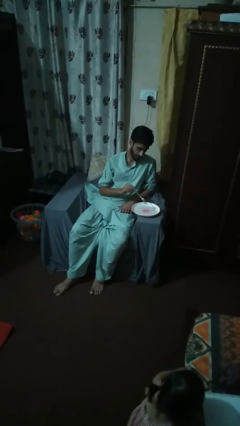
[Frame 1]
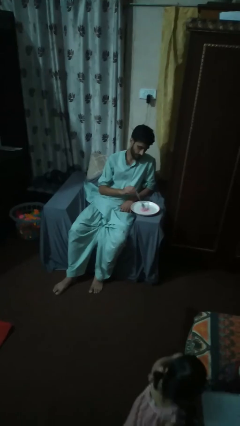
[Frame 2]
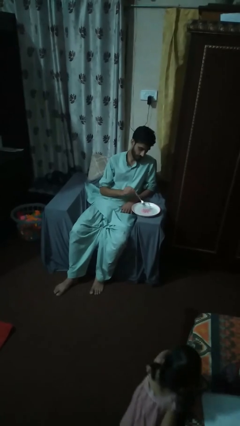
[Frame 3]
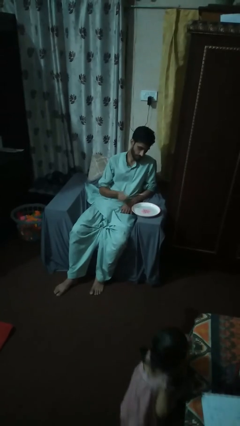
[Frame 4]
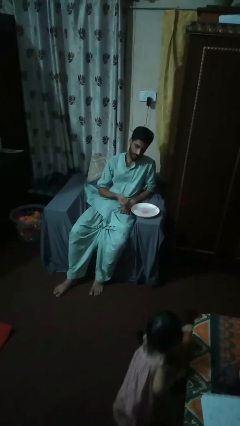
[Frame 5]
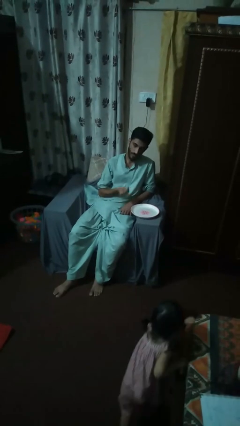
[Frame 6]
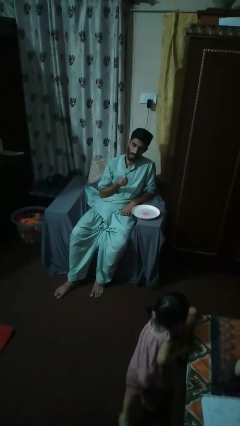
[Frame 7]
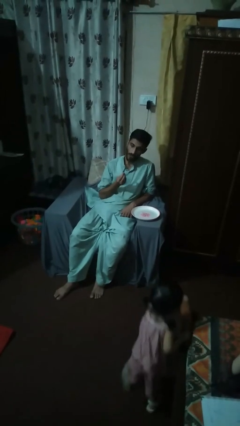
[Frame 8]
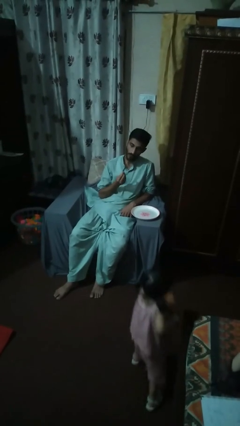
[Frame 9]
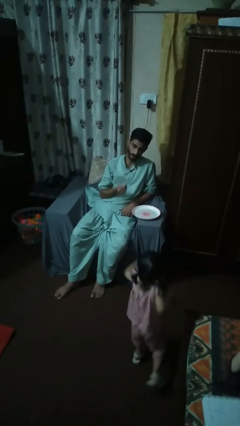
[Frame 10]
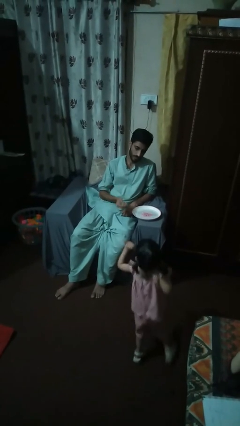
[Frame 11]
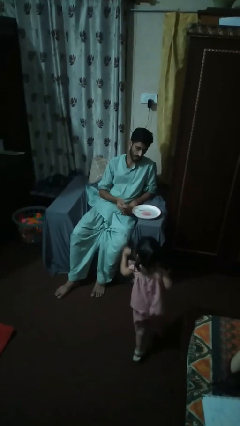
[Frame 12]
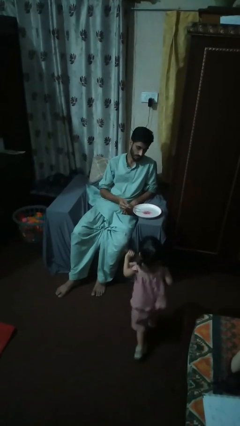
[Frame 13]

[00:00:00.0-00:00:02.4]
person eats with utensil

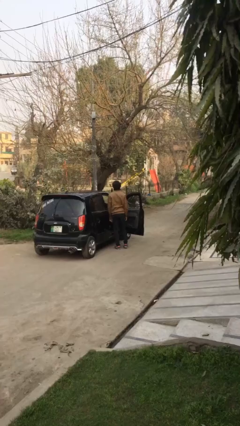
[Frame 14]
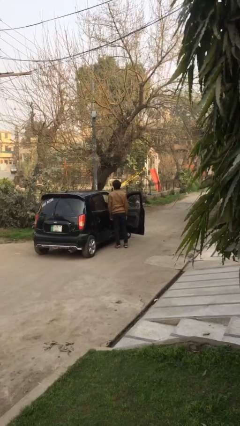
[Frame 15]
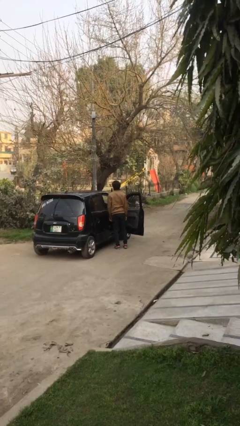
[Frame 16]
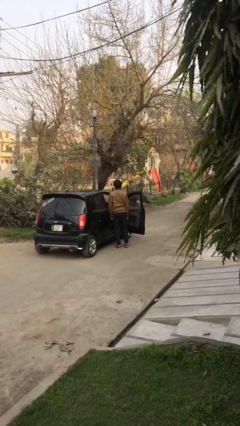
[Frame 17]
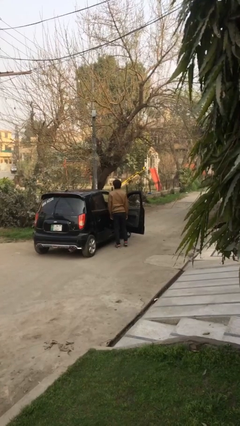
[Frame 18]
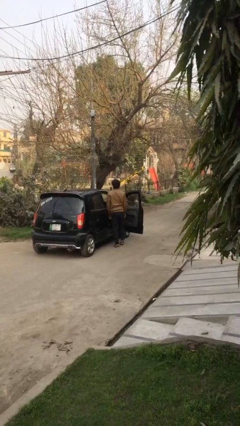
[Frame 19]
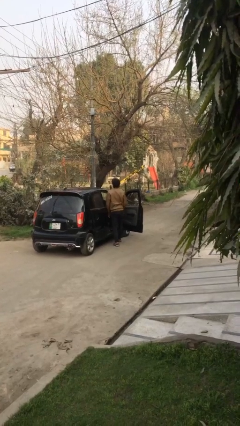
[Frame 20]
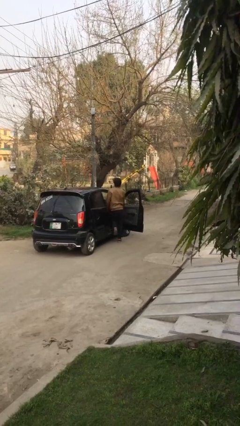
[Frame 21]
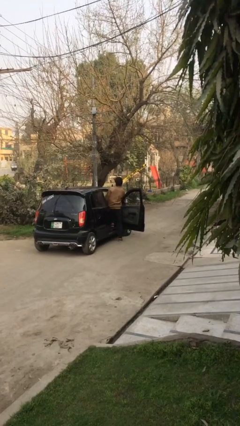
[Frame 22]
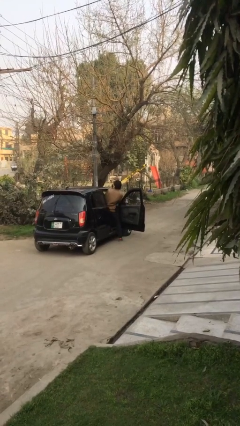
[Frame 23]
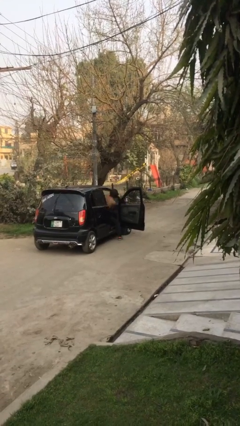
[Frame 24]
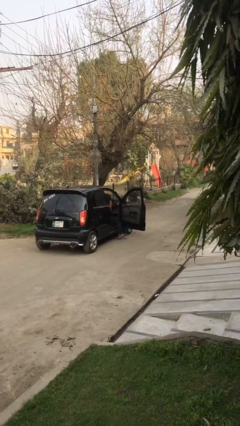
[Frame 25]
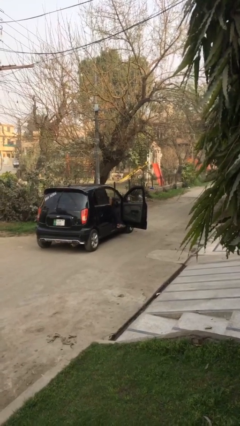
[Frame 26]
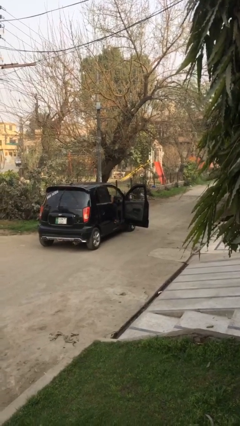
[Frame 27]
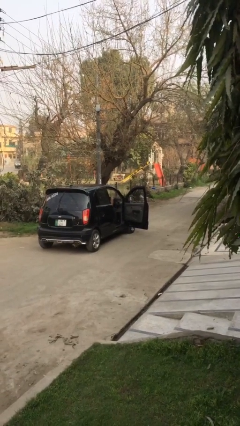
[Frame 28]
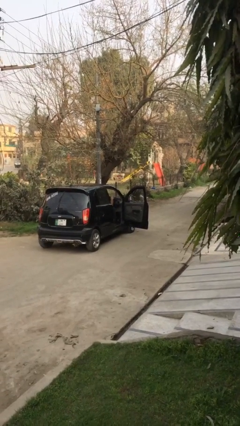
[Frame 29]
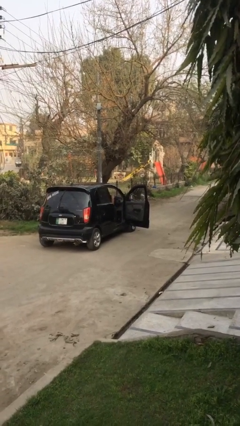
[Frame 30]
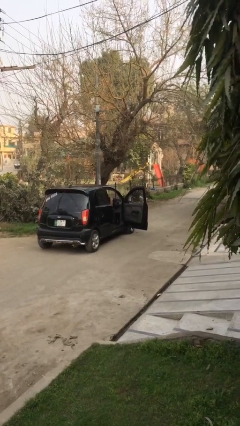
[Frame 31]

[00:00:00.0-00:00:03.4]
person enters car

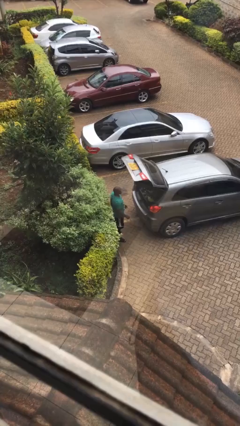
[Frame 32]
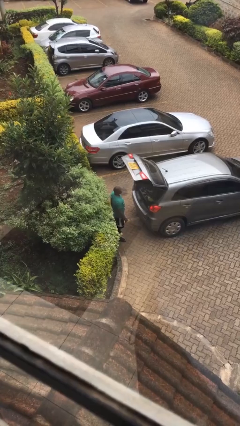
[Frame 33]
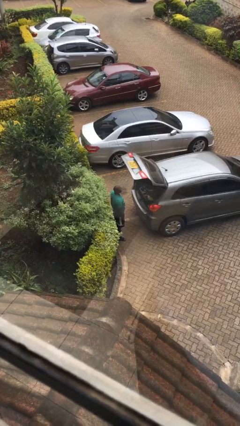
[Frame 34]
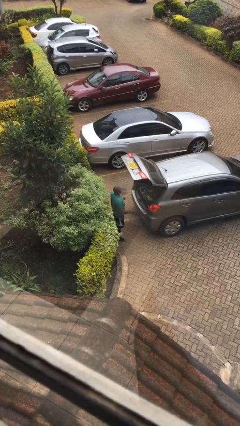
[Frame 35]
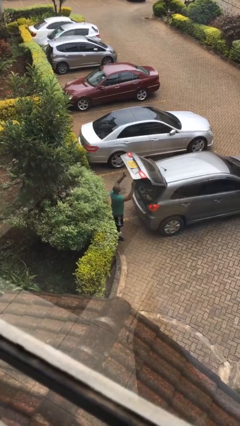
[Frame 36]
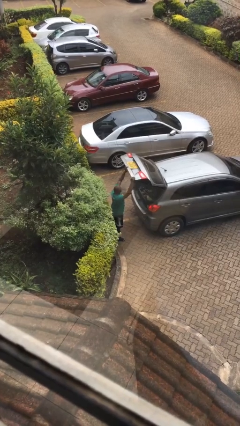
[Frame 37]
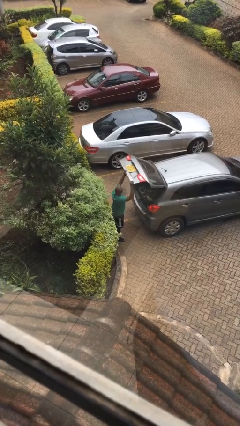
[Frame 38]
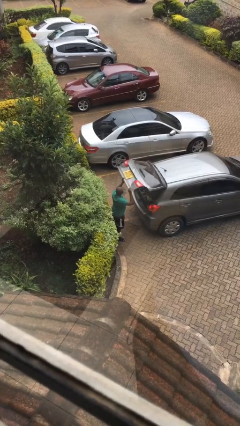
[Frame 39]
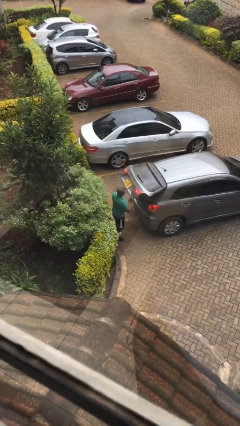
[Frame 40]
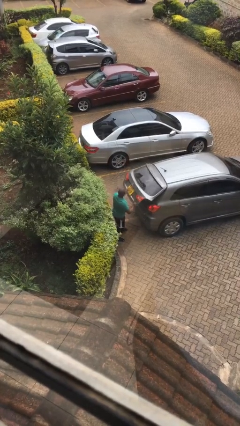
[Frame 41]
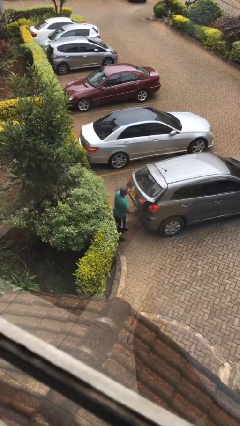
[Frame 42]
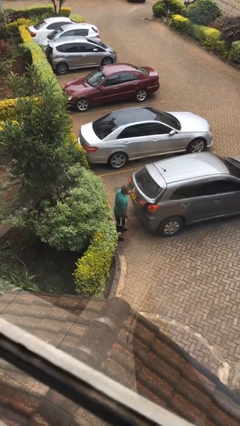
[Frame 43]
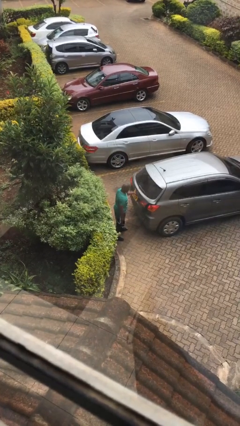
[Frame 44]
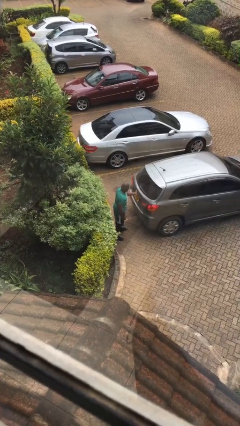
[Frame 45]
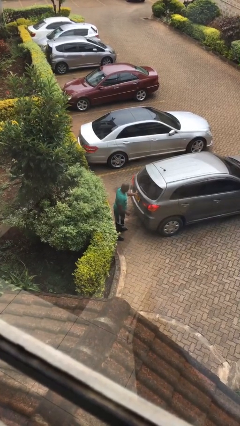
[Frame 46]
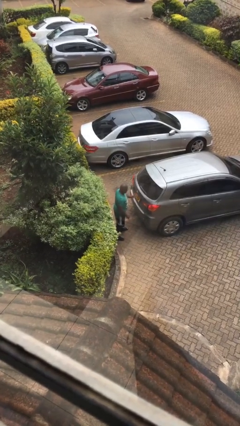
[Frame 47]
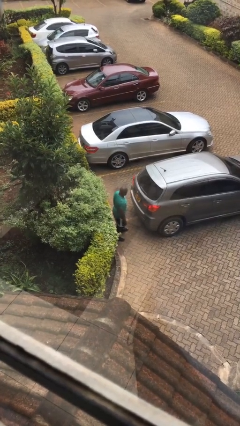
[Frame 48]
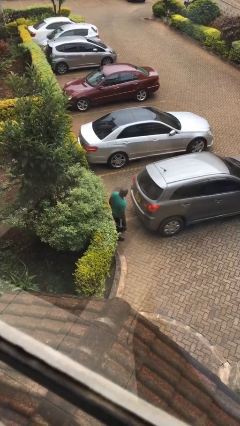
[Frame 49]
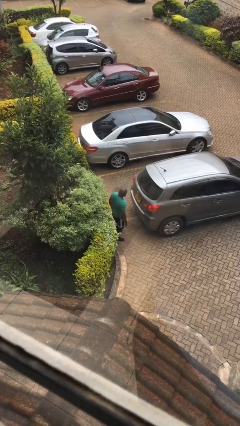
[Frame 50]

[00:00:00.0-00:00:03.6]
person closes car trunk

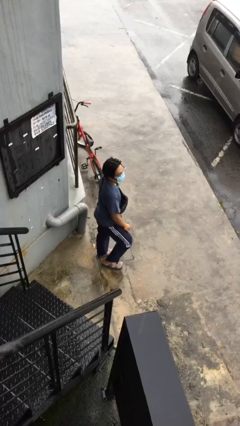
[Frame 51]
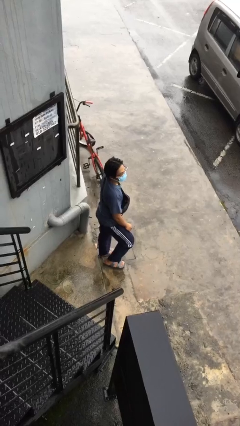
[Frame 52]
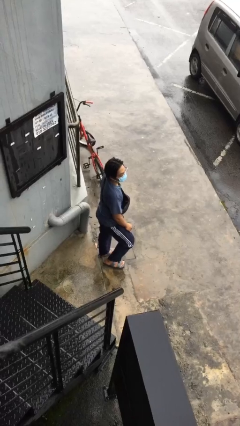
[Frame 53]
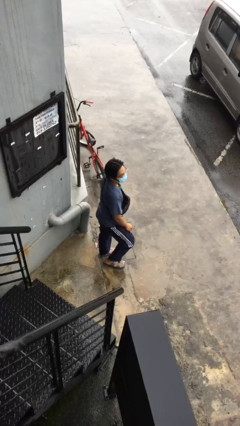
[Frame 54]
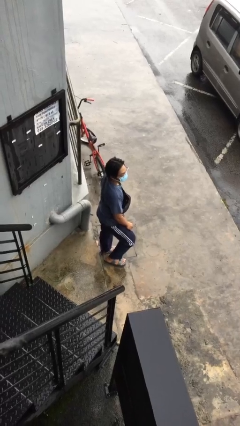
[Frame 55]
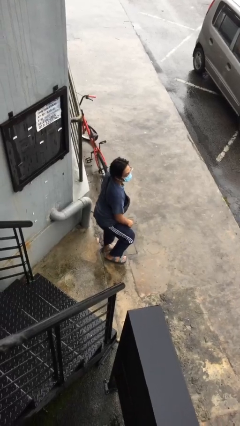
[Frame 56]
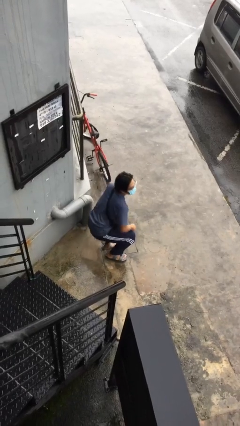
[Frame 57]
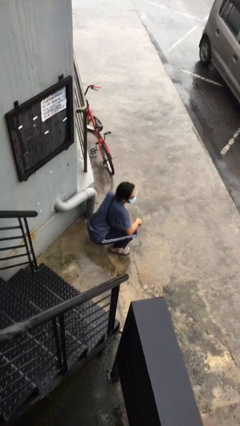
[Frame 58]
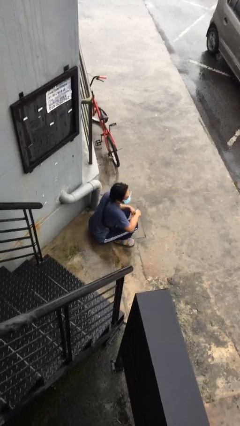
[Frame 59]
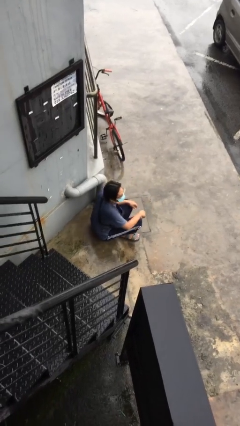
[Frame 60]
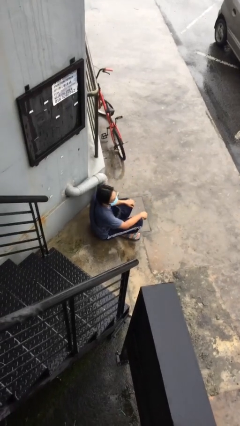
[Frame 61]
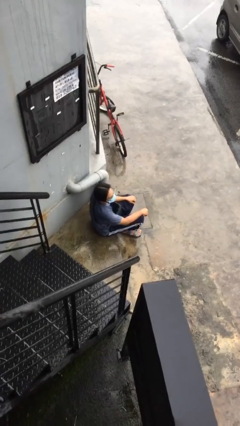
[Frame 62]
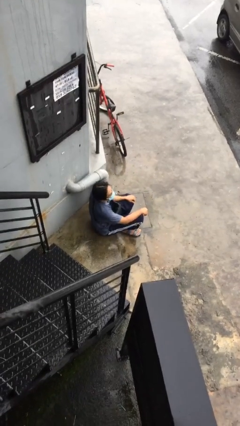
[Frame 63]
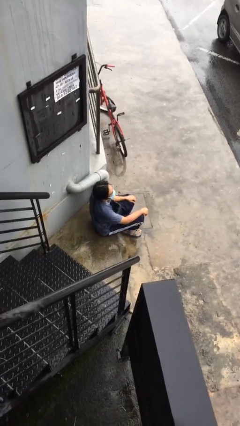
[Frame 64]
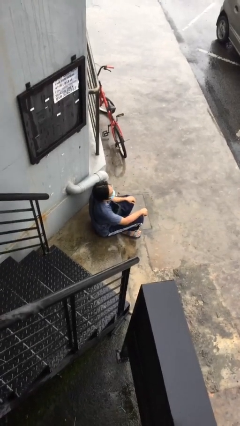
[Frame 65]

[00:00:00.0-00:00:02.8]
person sits down

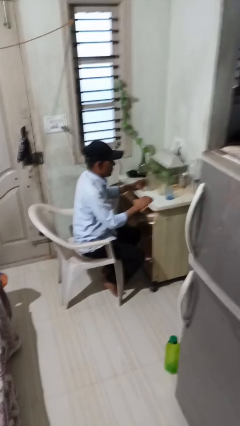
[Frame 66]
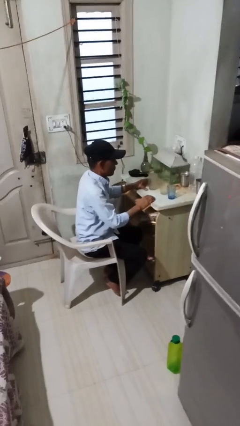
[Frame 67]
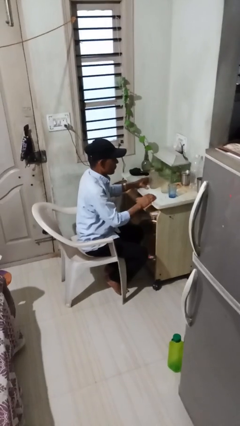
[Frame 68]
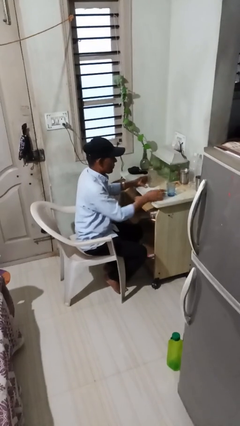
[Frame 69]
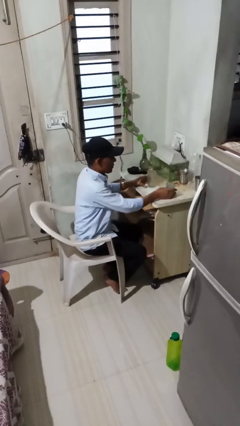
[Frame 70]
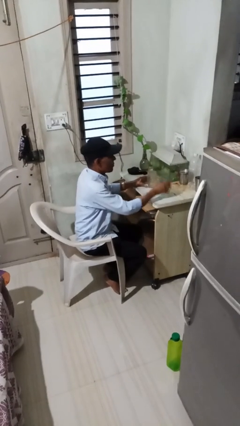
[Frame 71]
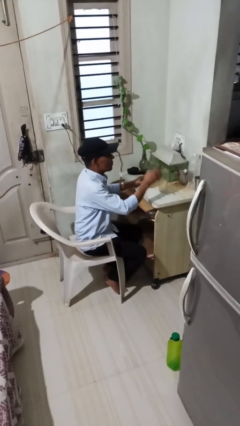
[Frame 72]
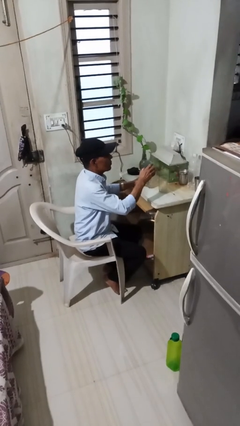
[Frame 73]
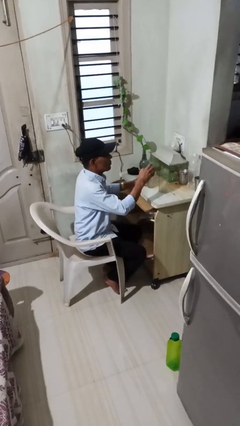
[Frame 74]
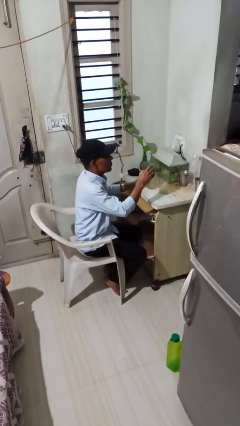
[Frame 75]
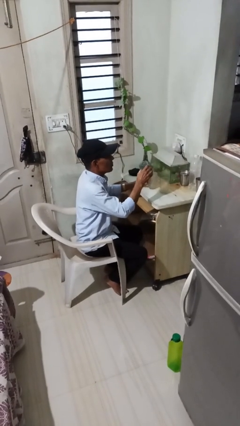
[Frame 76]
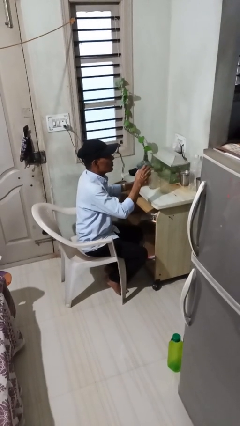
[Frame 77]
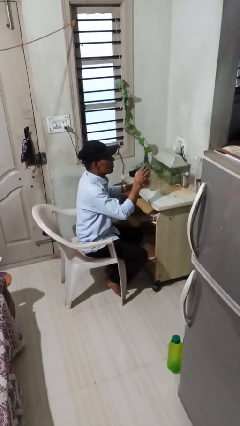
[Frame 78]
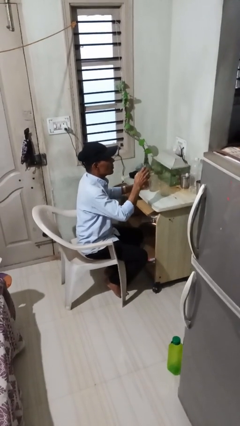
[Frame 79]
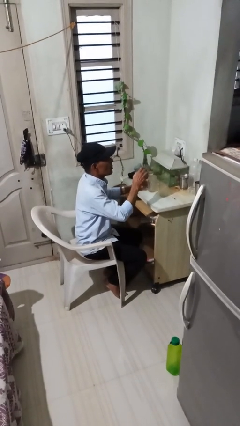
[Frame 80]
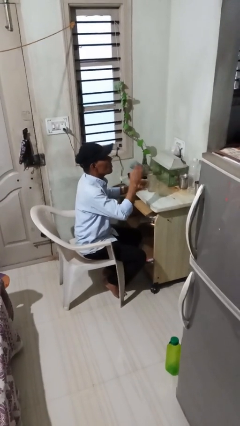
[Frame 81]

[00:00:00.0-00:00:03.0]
person picks up object from table

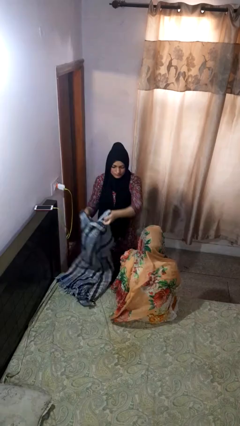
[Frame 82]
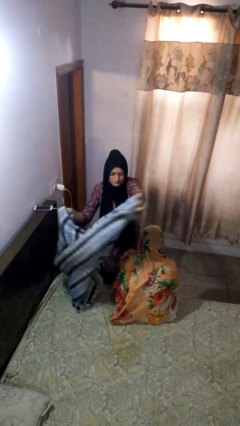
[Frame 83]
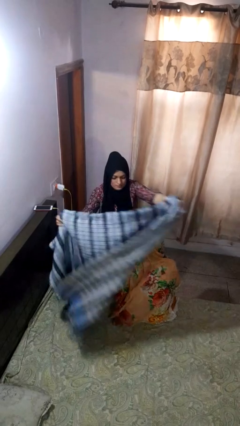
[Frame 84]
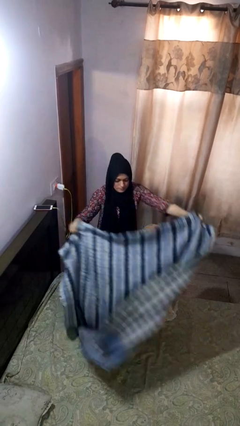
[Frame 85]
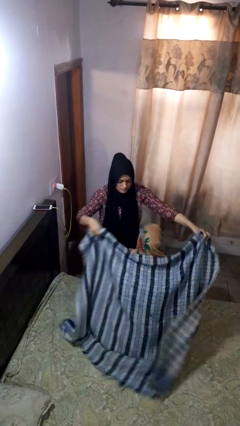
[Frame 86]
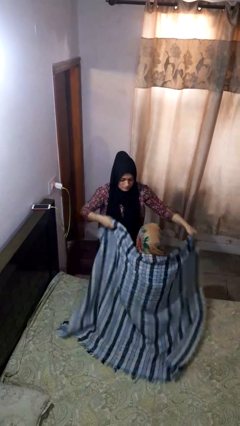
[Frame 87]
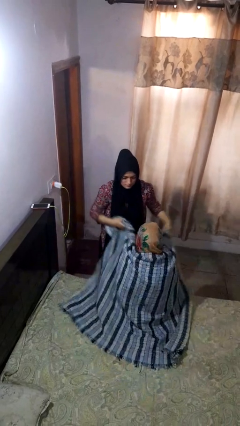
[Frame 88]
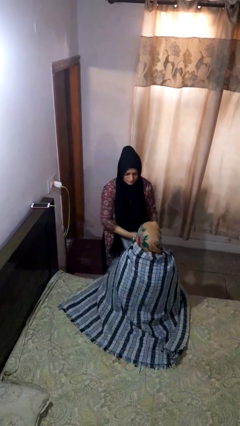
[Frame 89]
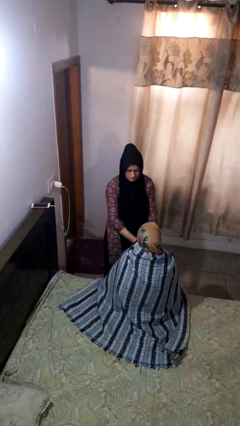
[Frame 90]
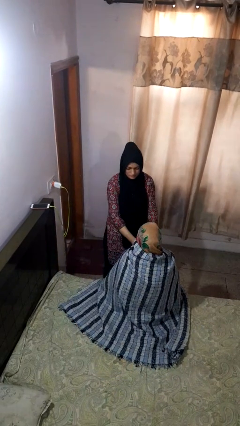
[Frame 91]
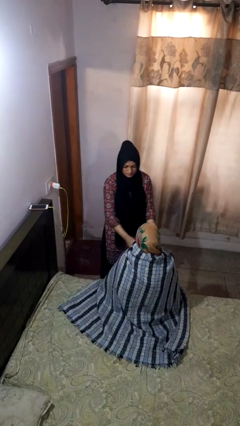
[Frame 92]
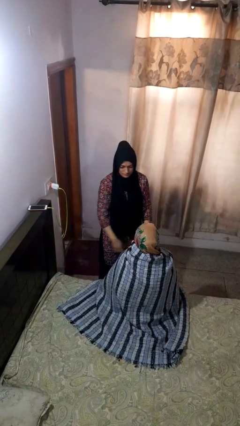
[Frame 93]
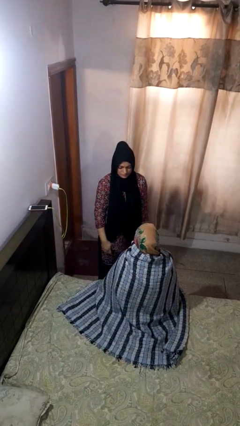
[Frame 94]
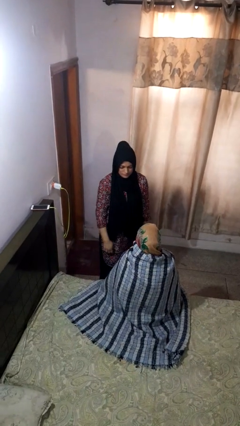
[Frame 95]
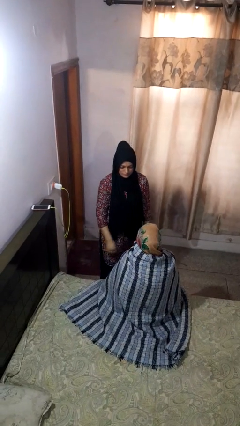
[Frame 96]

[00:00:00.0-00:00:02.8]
person covers friend with blanket
